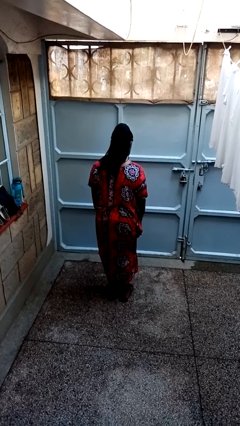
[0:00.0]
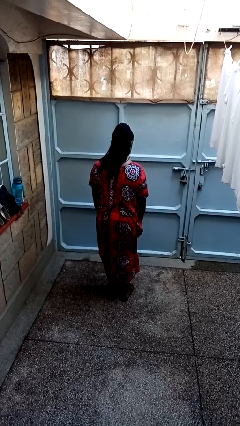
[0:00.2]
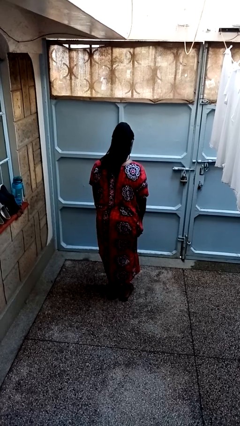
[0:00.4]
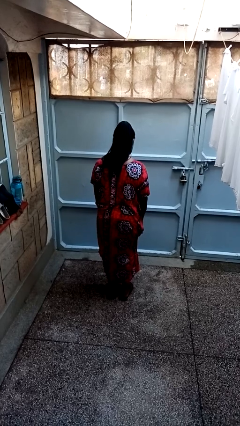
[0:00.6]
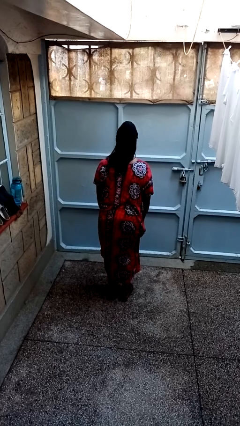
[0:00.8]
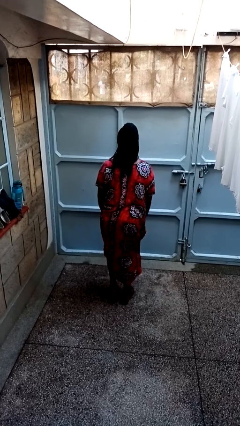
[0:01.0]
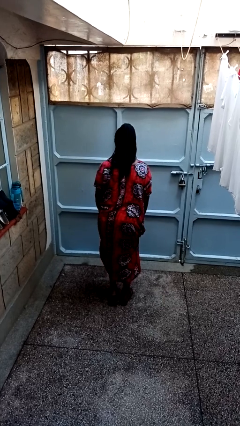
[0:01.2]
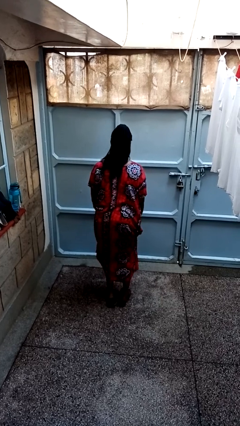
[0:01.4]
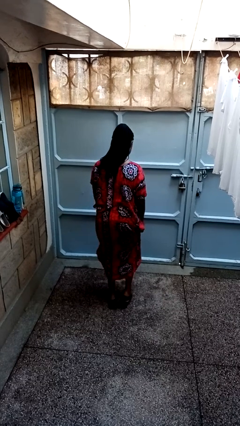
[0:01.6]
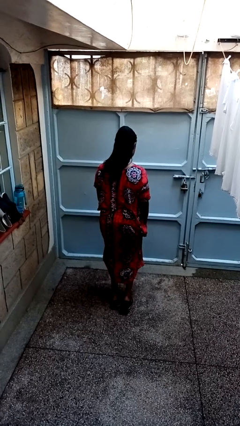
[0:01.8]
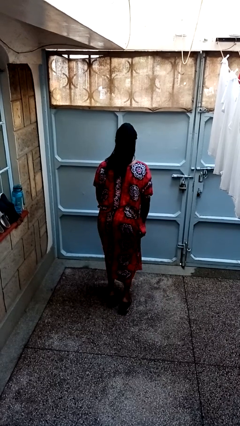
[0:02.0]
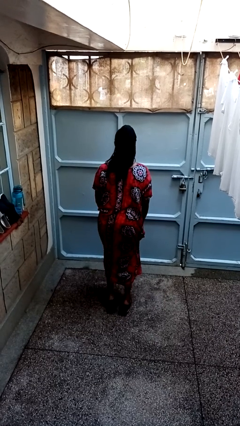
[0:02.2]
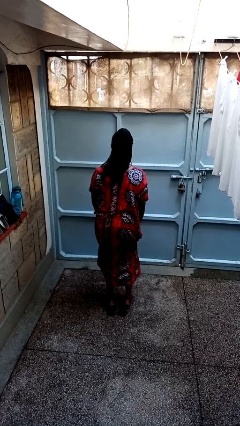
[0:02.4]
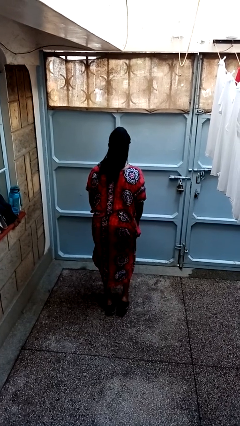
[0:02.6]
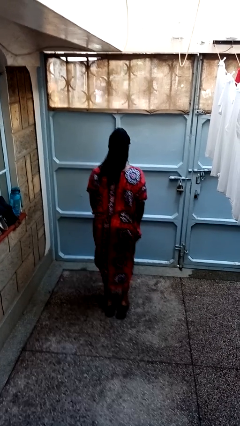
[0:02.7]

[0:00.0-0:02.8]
person walks tiptoe

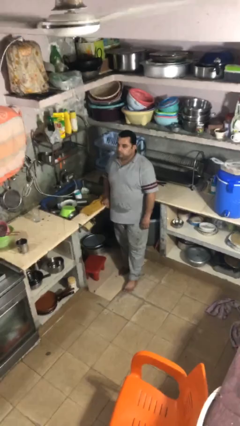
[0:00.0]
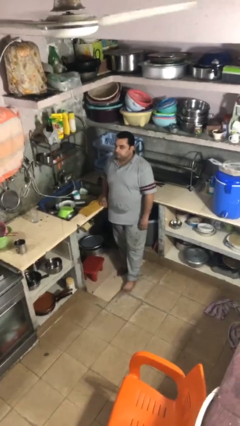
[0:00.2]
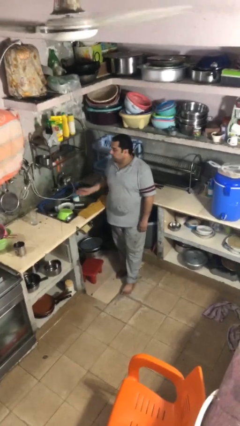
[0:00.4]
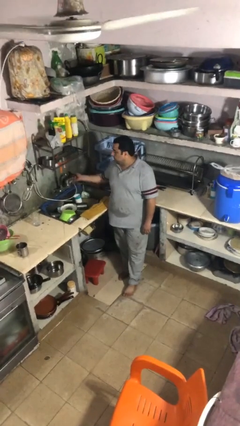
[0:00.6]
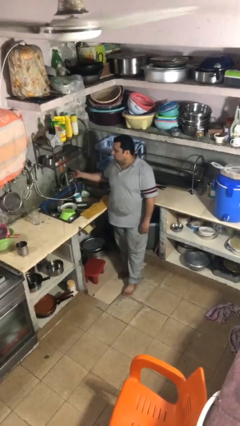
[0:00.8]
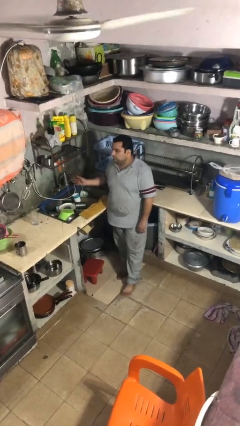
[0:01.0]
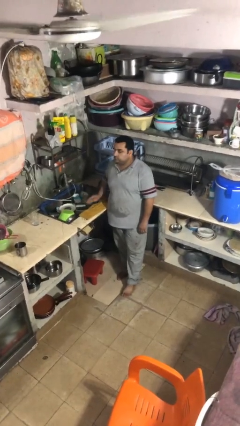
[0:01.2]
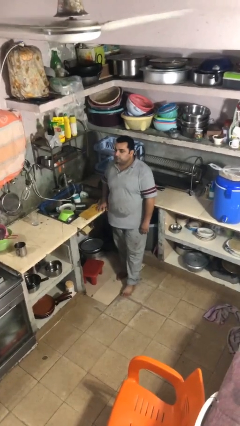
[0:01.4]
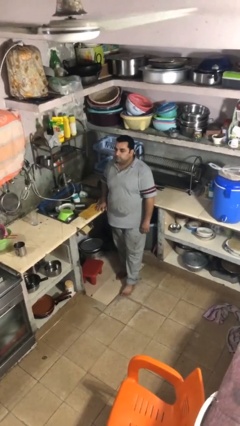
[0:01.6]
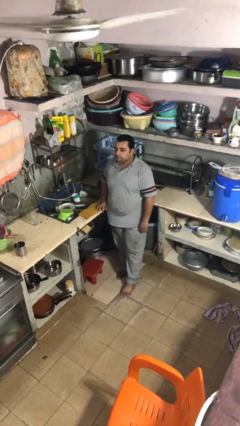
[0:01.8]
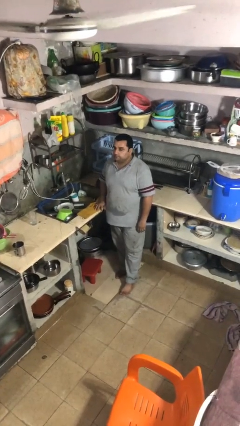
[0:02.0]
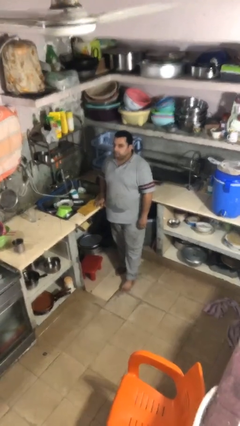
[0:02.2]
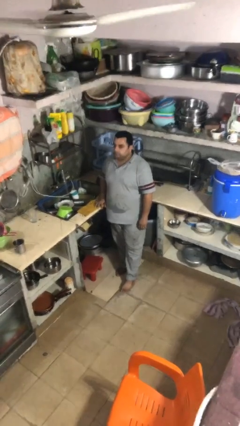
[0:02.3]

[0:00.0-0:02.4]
person turns on faucet

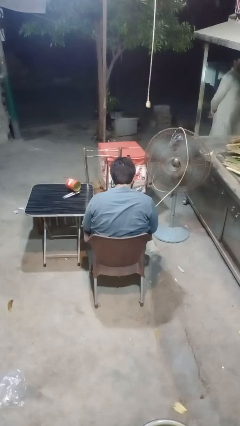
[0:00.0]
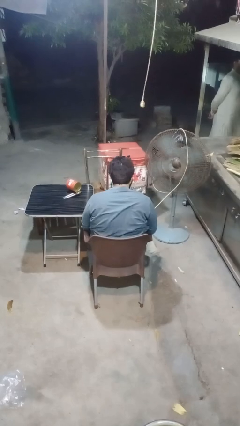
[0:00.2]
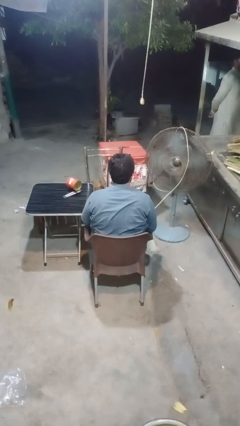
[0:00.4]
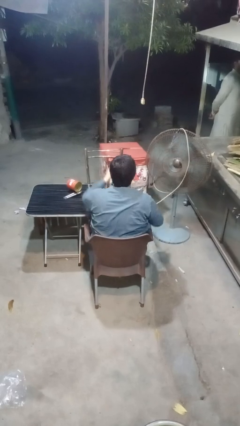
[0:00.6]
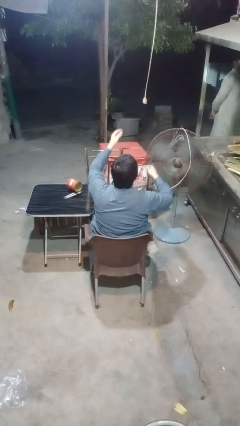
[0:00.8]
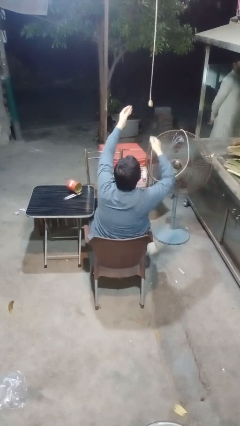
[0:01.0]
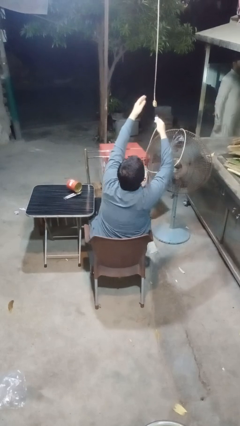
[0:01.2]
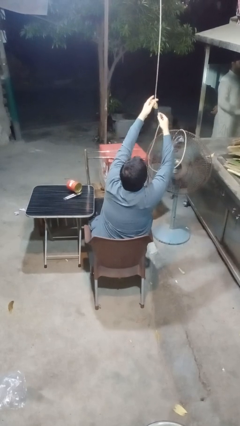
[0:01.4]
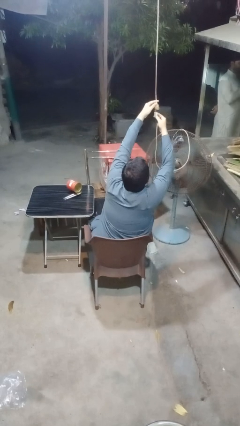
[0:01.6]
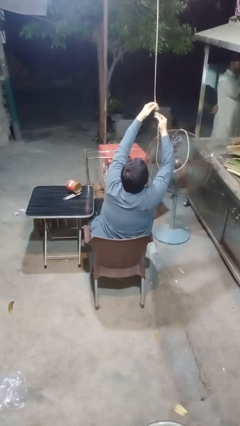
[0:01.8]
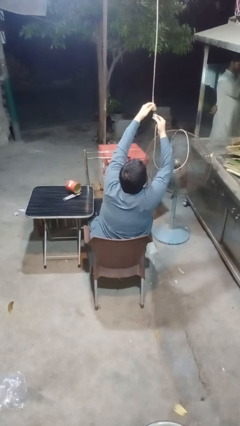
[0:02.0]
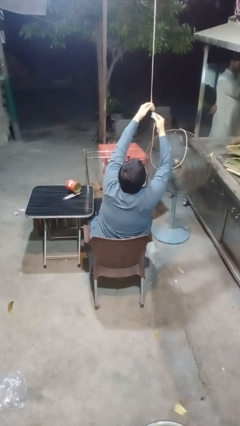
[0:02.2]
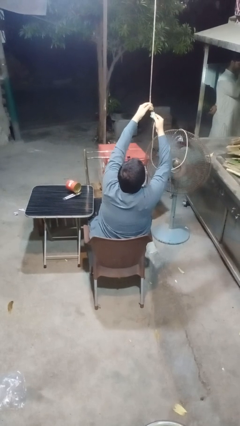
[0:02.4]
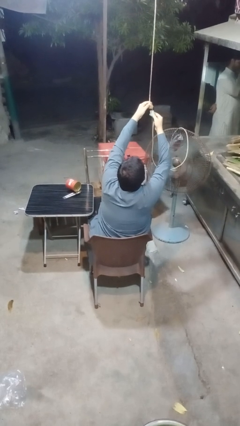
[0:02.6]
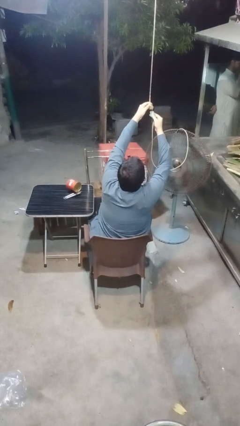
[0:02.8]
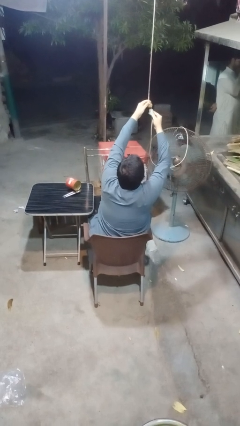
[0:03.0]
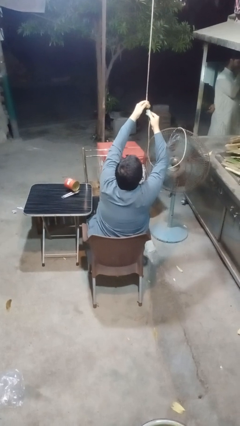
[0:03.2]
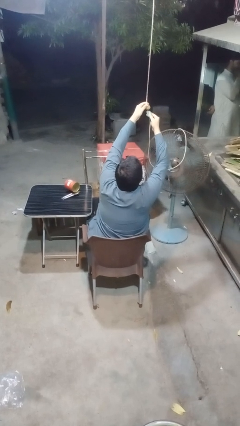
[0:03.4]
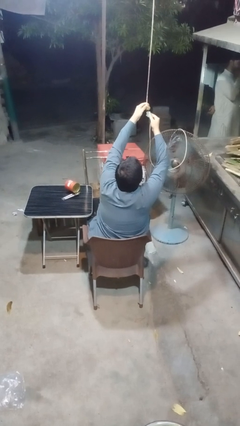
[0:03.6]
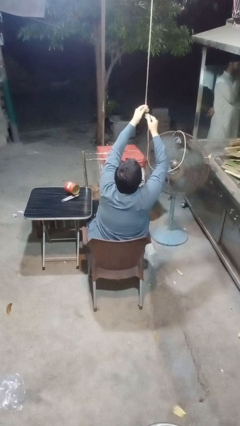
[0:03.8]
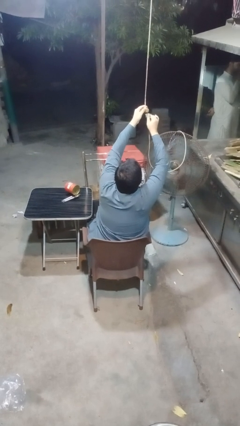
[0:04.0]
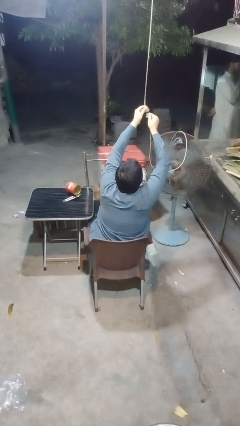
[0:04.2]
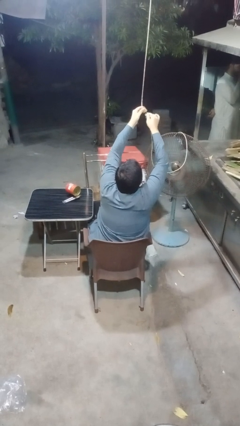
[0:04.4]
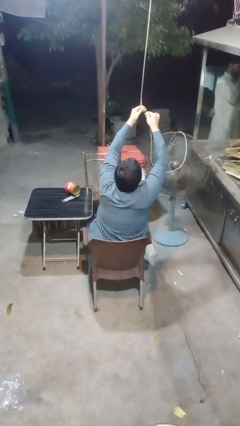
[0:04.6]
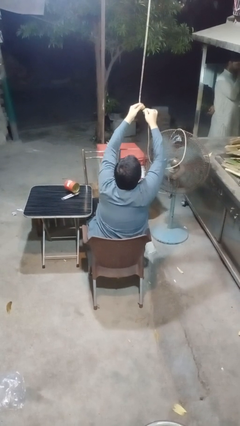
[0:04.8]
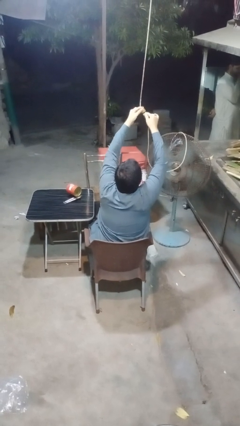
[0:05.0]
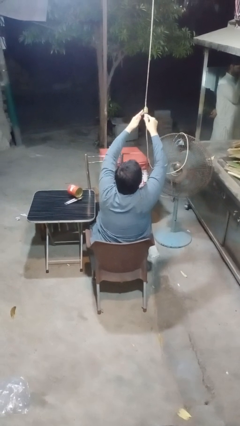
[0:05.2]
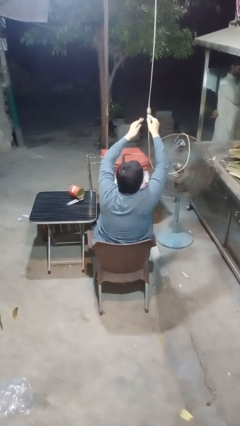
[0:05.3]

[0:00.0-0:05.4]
person turns on fan

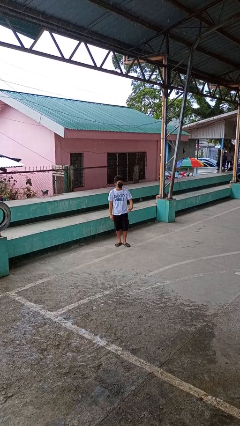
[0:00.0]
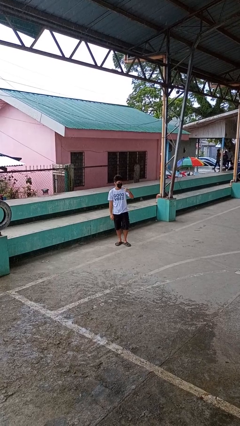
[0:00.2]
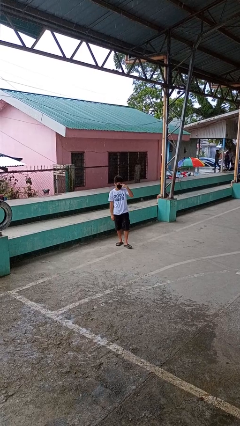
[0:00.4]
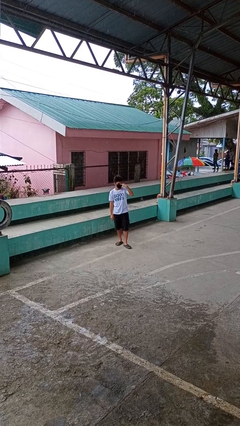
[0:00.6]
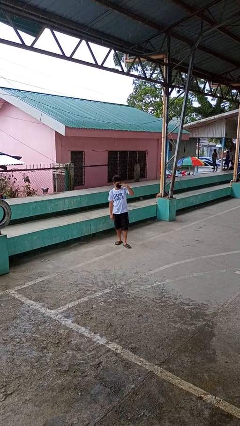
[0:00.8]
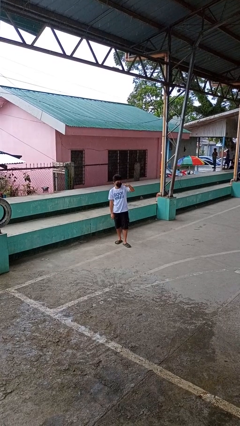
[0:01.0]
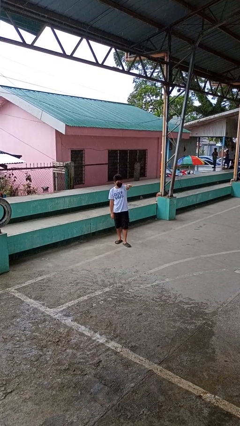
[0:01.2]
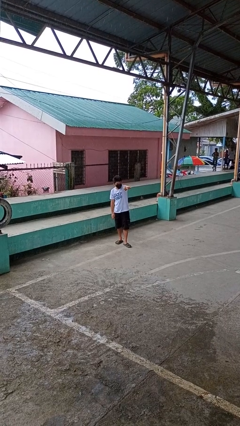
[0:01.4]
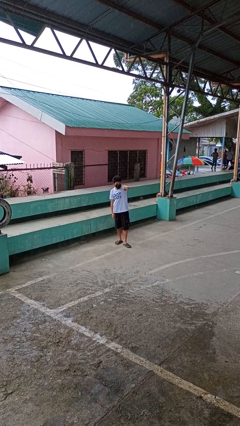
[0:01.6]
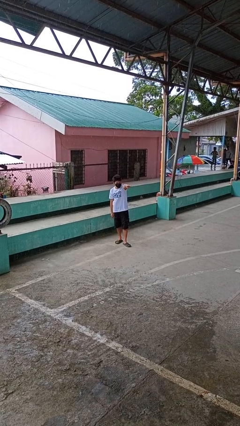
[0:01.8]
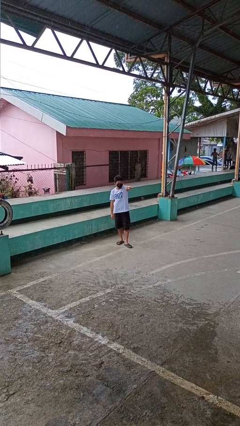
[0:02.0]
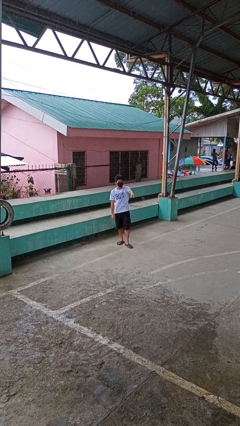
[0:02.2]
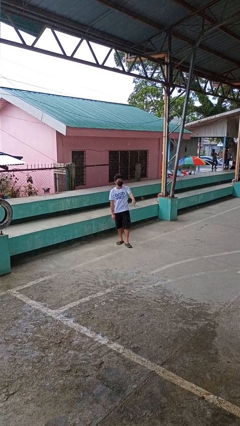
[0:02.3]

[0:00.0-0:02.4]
person gestures watch closely

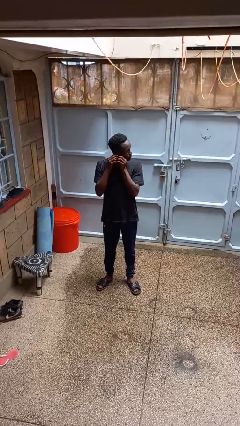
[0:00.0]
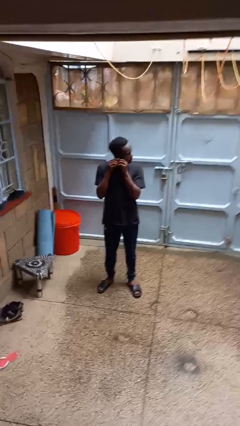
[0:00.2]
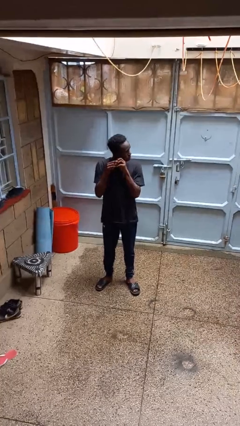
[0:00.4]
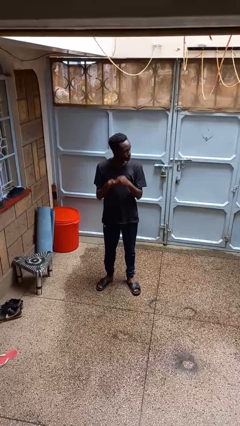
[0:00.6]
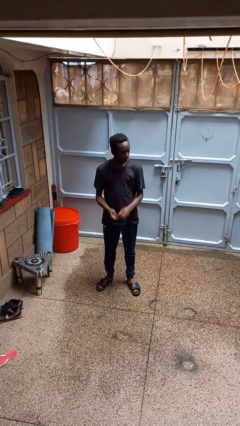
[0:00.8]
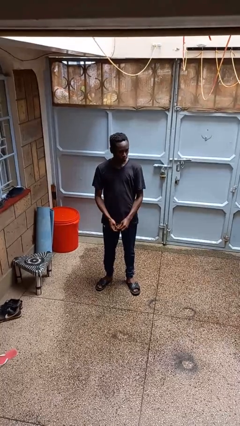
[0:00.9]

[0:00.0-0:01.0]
person takes off earrings

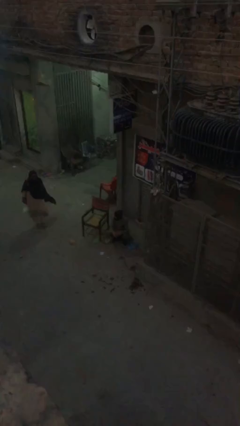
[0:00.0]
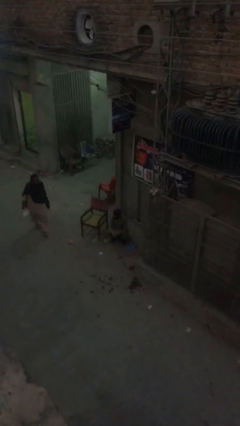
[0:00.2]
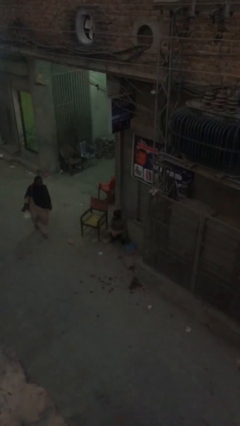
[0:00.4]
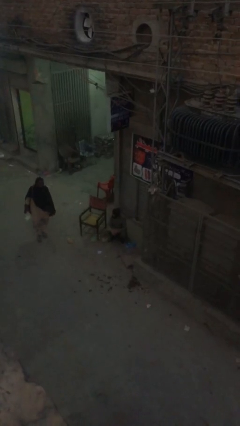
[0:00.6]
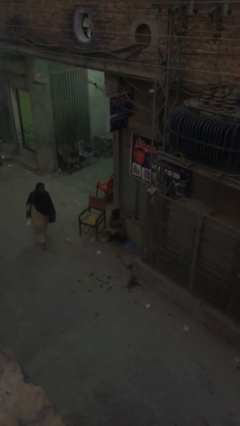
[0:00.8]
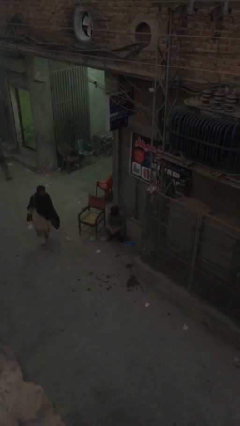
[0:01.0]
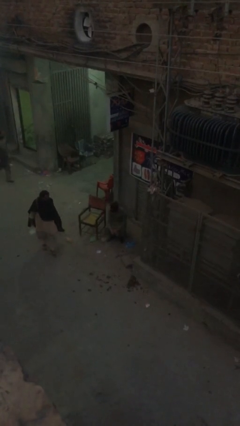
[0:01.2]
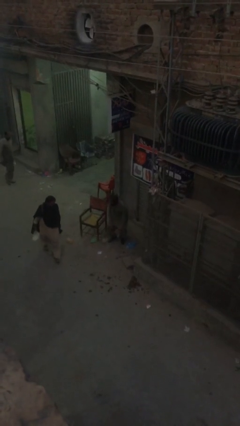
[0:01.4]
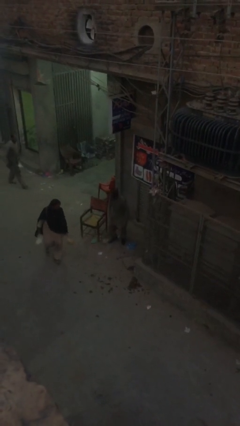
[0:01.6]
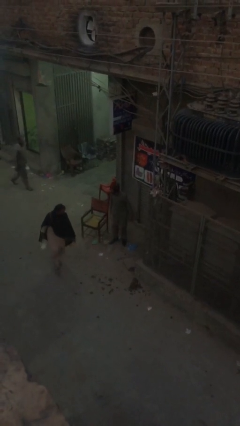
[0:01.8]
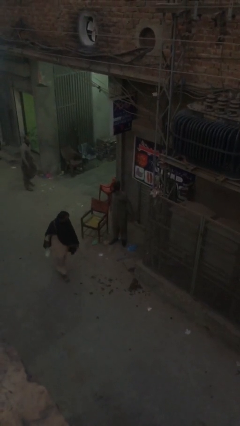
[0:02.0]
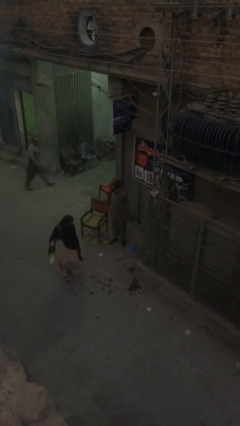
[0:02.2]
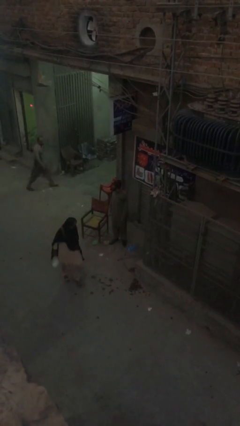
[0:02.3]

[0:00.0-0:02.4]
person stands up

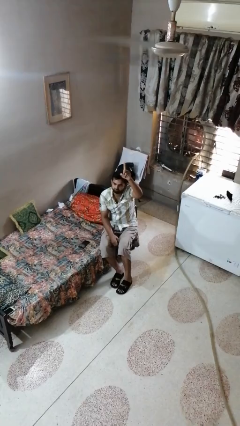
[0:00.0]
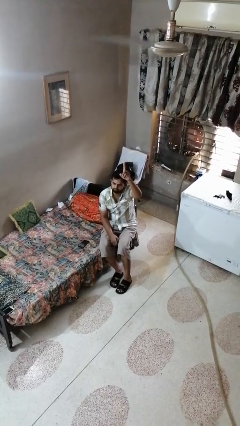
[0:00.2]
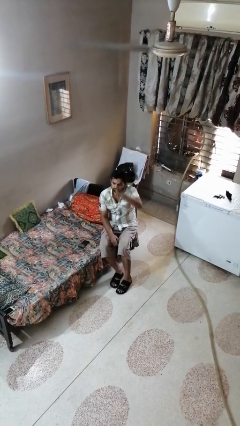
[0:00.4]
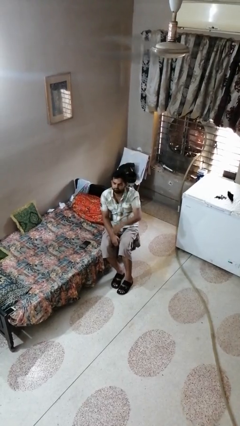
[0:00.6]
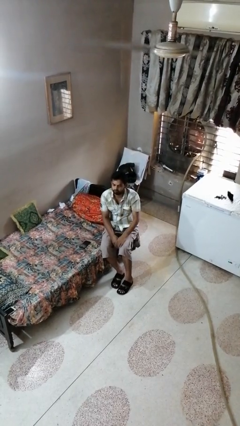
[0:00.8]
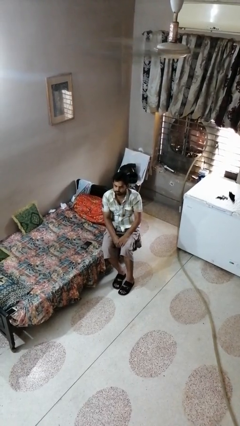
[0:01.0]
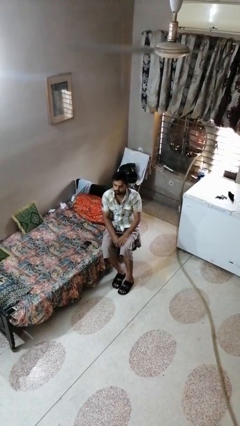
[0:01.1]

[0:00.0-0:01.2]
person gestures lower hand
